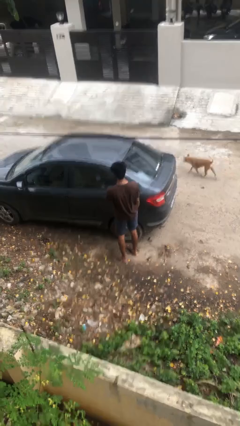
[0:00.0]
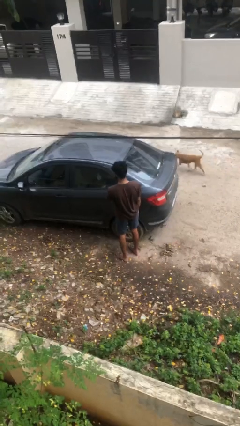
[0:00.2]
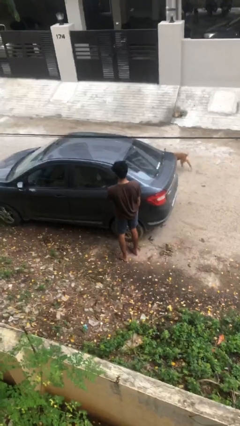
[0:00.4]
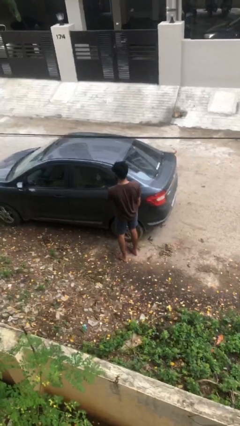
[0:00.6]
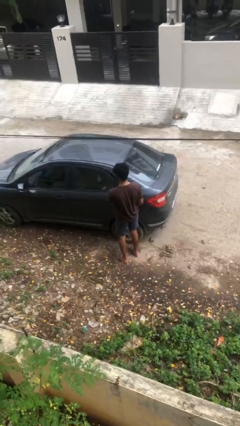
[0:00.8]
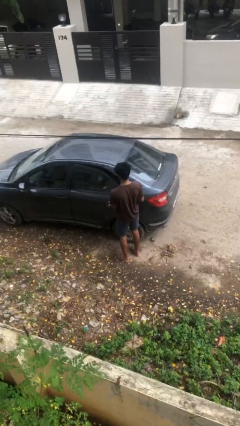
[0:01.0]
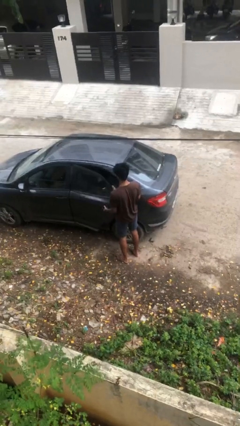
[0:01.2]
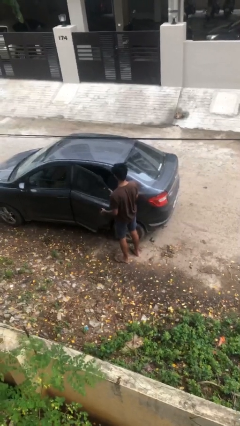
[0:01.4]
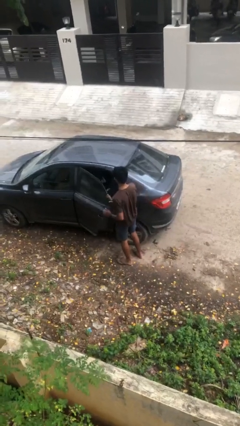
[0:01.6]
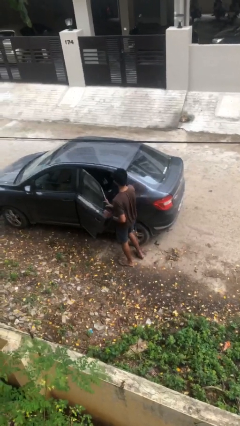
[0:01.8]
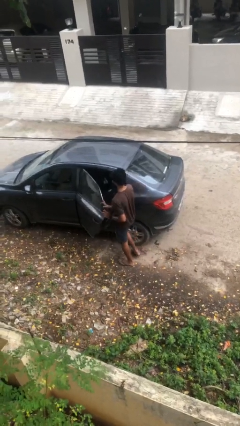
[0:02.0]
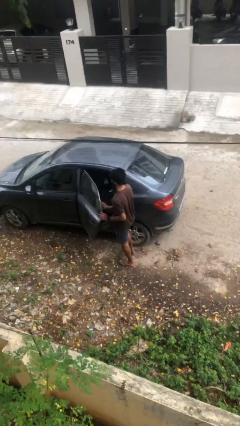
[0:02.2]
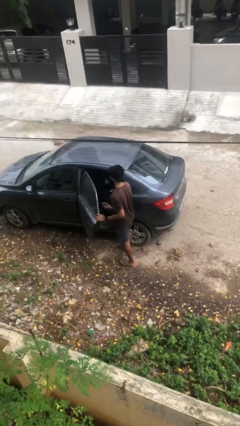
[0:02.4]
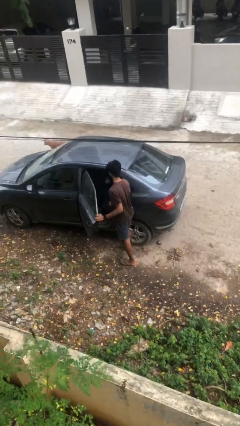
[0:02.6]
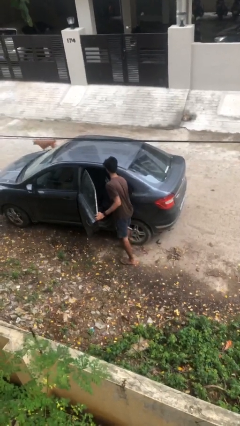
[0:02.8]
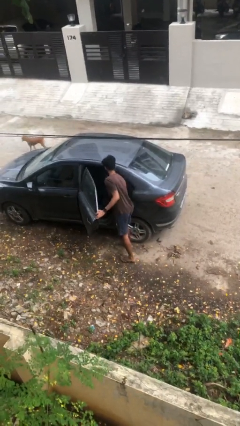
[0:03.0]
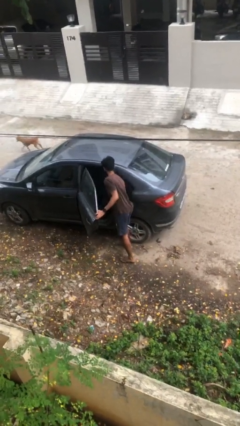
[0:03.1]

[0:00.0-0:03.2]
person opens car door

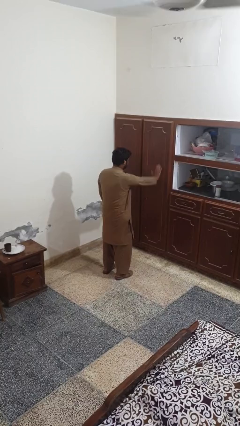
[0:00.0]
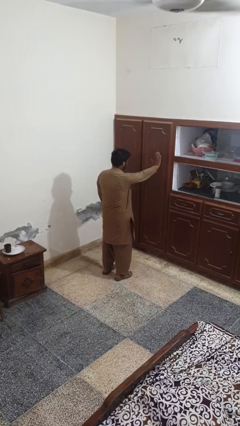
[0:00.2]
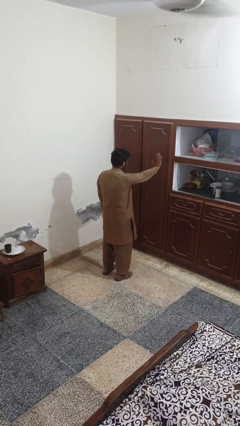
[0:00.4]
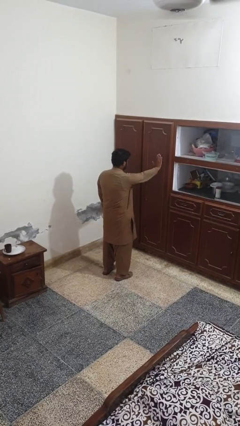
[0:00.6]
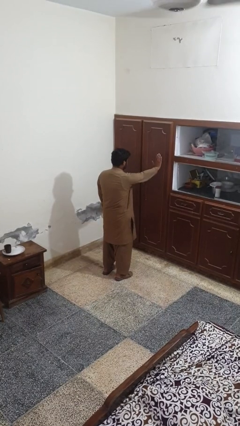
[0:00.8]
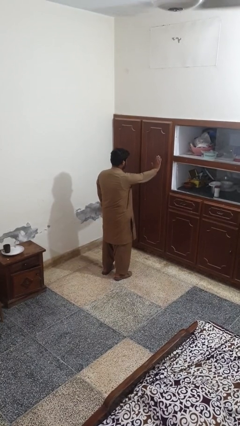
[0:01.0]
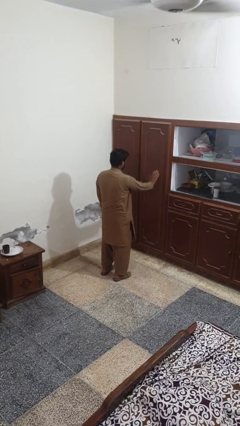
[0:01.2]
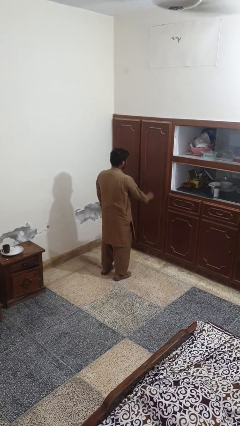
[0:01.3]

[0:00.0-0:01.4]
person gestures stop

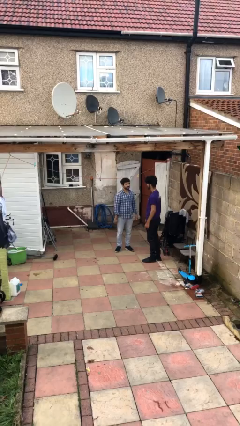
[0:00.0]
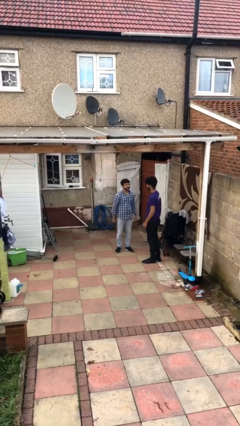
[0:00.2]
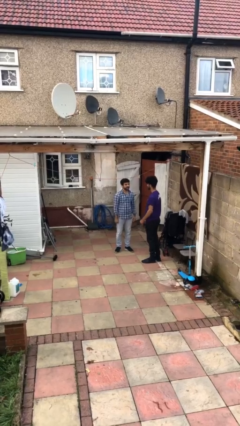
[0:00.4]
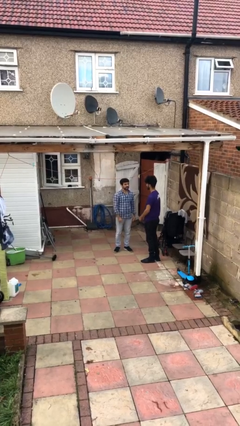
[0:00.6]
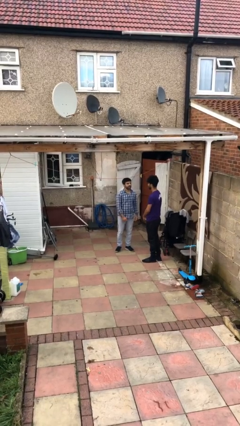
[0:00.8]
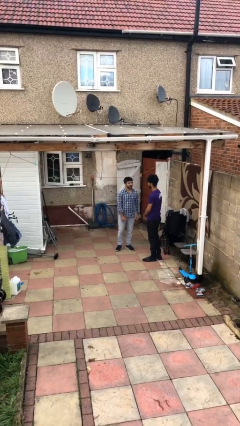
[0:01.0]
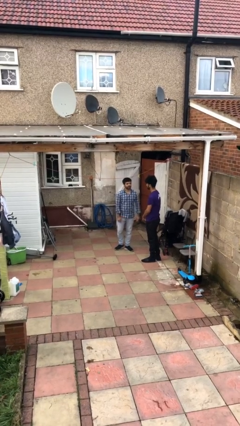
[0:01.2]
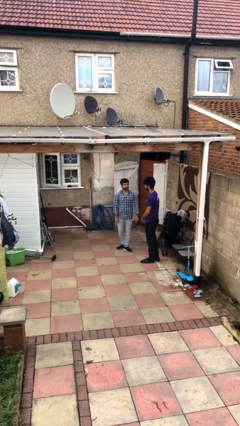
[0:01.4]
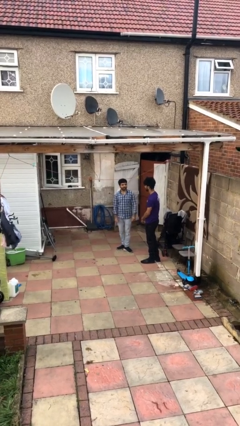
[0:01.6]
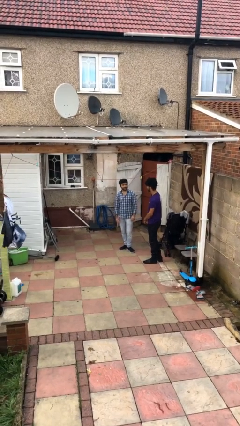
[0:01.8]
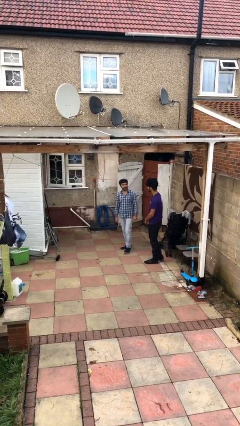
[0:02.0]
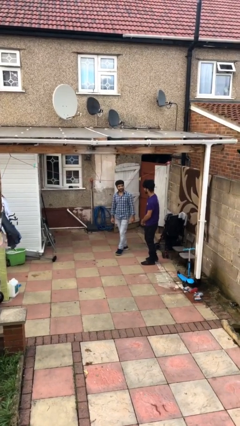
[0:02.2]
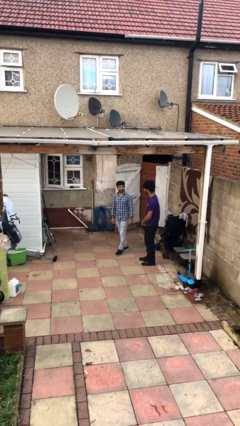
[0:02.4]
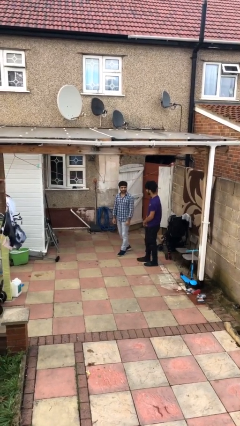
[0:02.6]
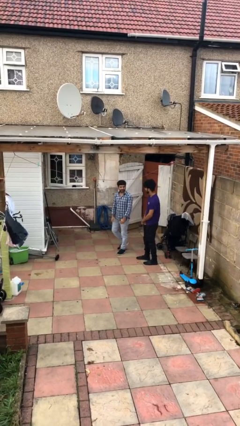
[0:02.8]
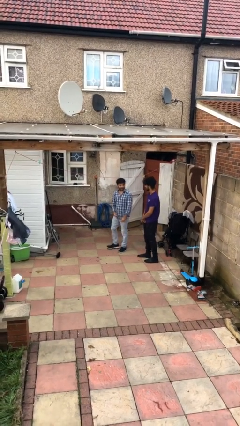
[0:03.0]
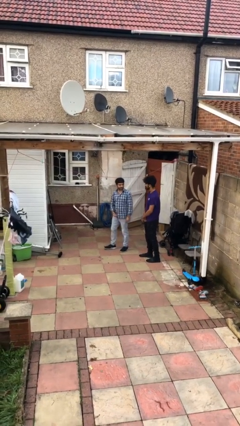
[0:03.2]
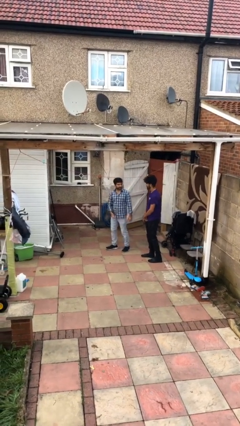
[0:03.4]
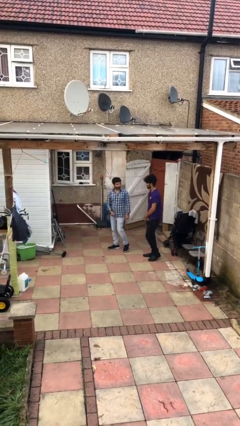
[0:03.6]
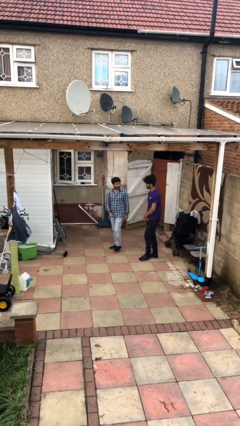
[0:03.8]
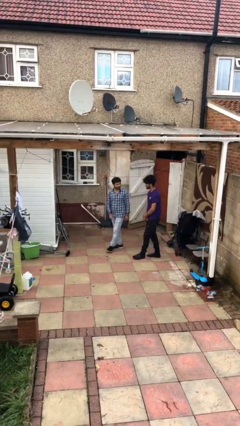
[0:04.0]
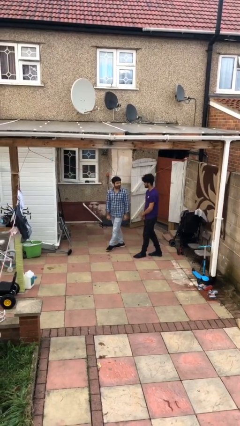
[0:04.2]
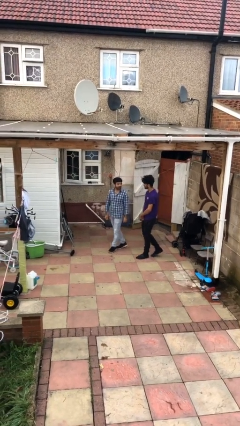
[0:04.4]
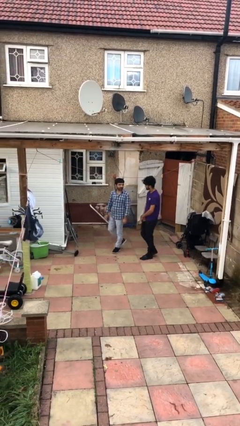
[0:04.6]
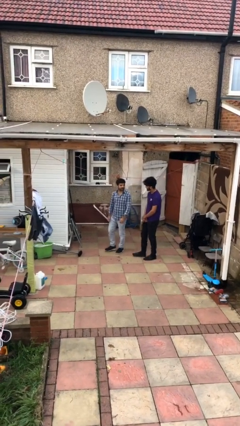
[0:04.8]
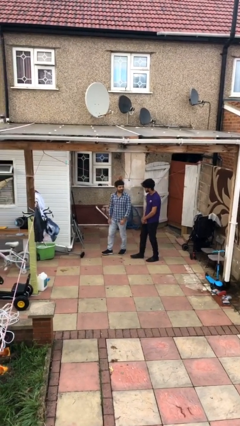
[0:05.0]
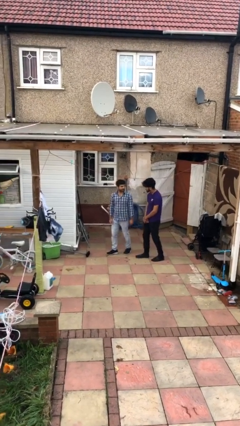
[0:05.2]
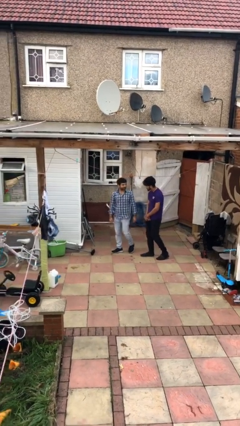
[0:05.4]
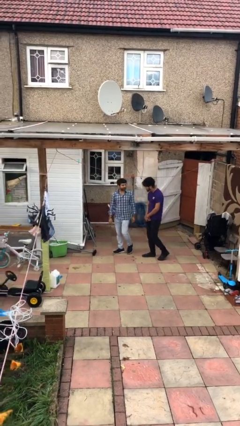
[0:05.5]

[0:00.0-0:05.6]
person talks to person

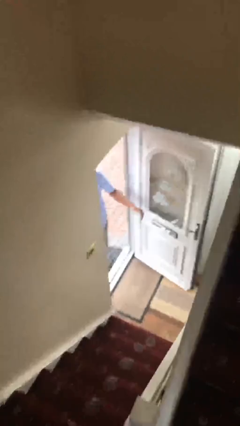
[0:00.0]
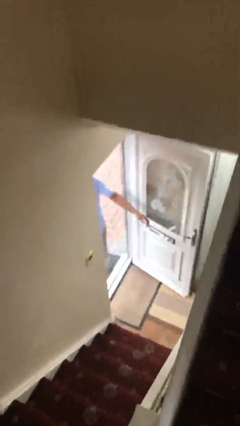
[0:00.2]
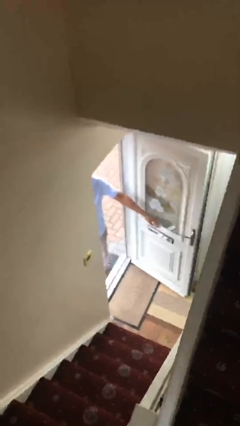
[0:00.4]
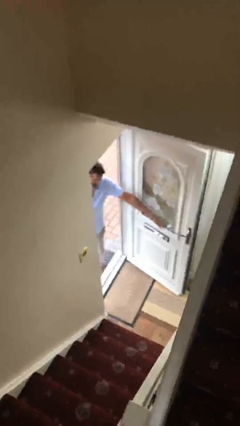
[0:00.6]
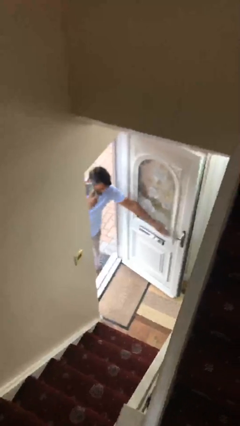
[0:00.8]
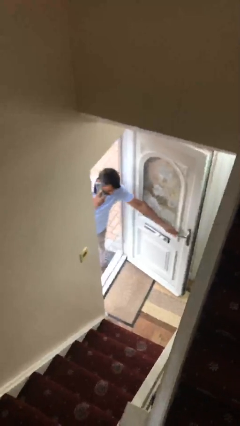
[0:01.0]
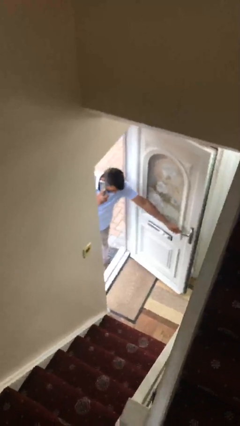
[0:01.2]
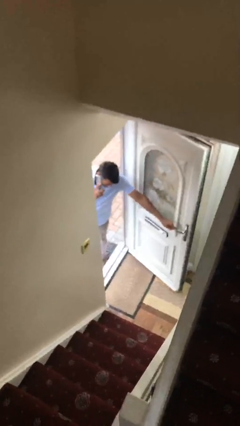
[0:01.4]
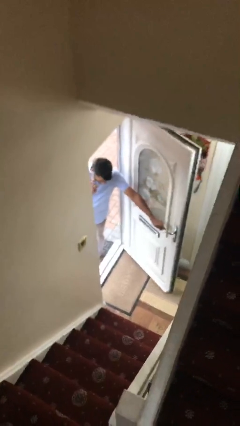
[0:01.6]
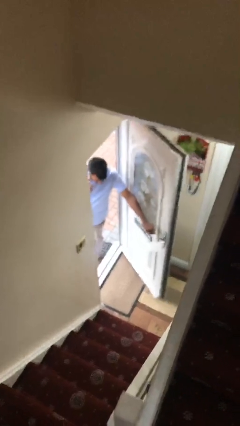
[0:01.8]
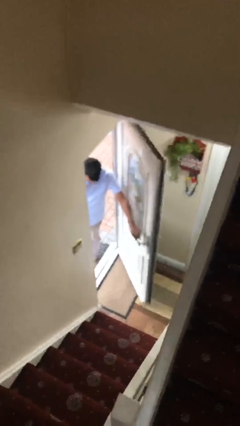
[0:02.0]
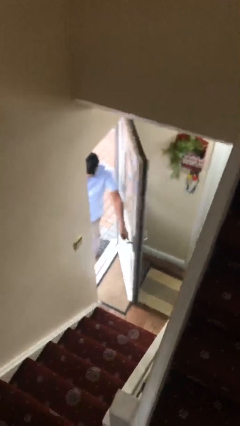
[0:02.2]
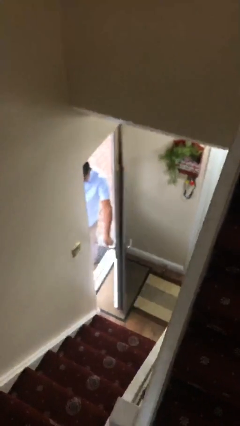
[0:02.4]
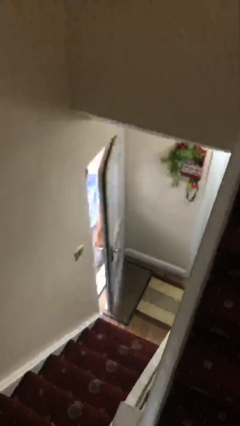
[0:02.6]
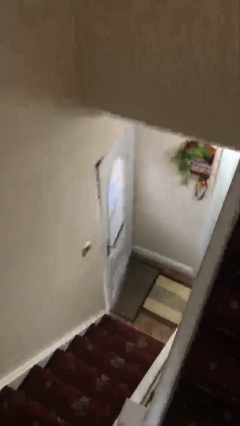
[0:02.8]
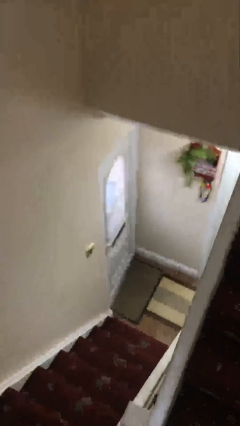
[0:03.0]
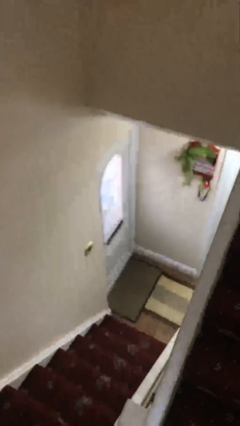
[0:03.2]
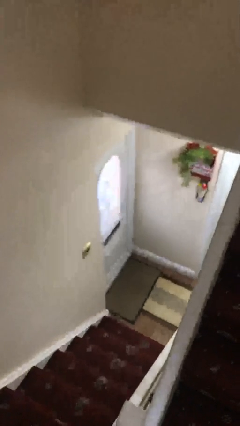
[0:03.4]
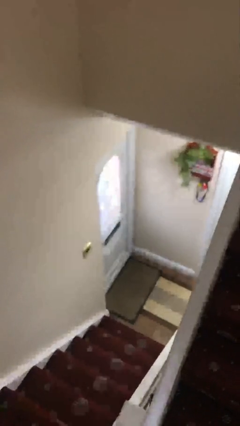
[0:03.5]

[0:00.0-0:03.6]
person closes facility door

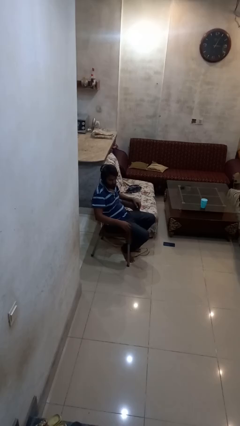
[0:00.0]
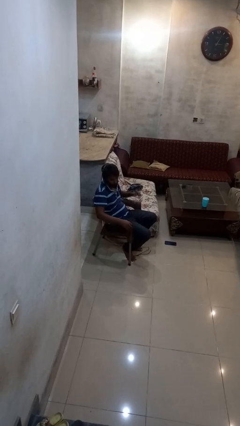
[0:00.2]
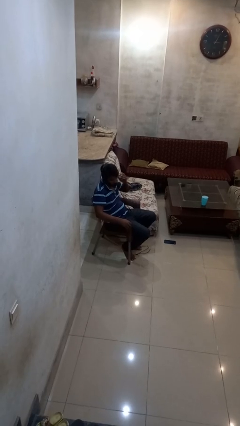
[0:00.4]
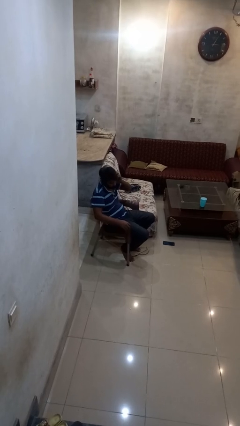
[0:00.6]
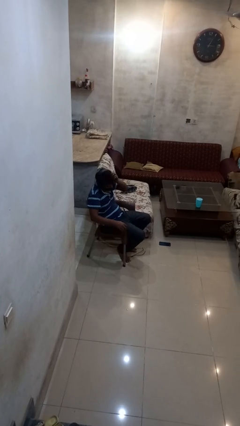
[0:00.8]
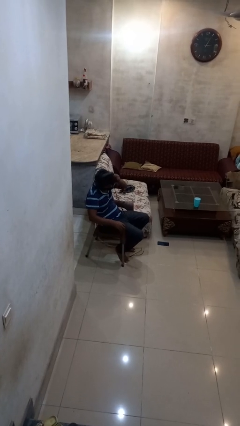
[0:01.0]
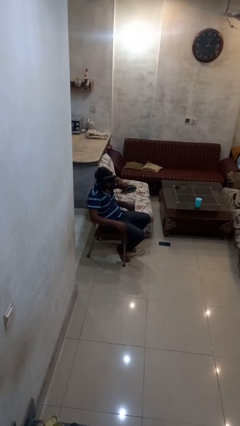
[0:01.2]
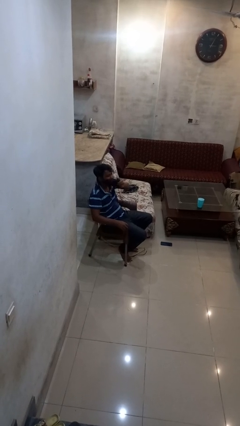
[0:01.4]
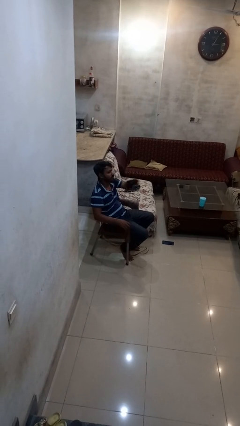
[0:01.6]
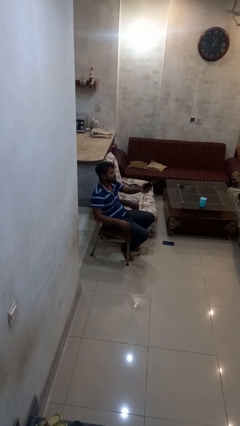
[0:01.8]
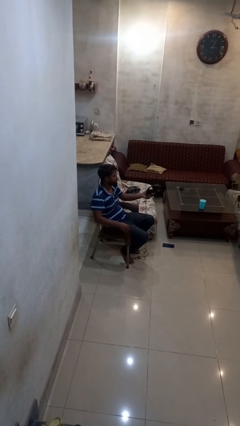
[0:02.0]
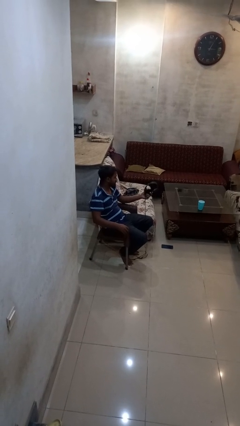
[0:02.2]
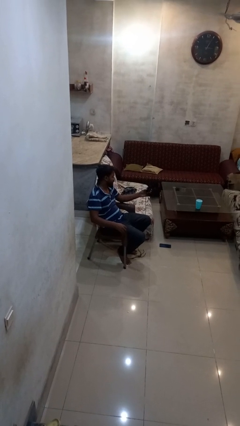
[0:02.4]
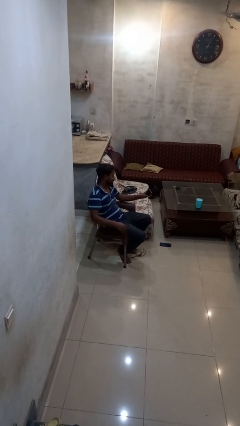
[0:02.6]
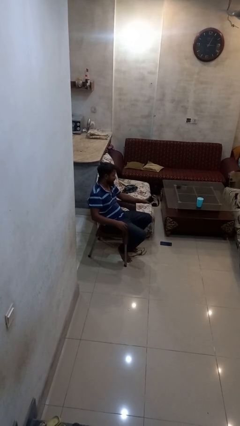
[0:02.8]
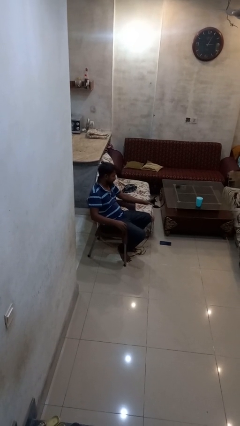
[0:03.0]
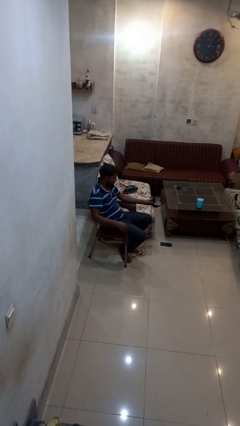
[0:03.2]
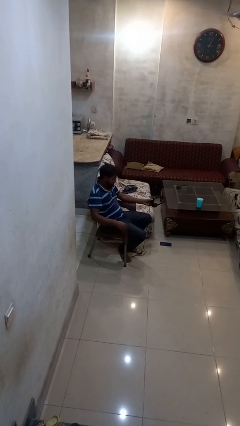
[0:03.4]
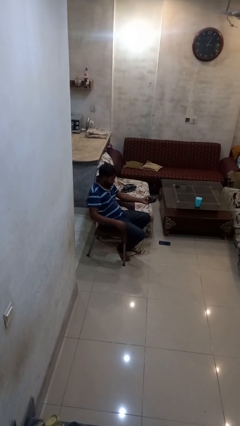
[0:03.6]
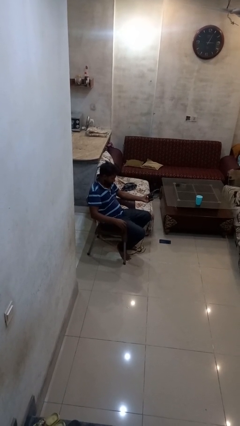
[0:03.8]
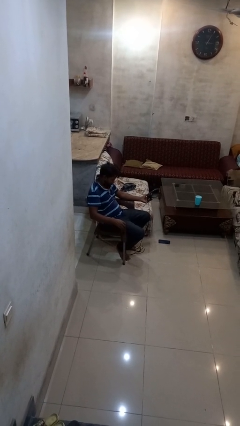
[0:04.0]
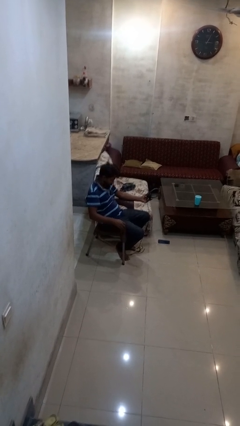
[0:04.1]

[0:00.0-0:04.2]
person takes off headphones
